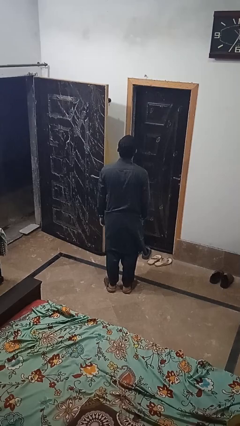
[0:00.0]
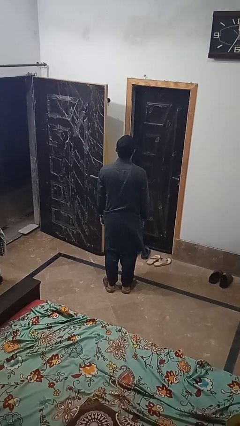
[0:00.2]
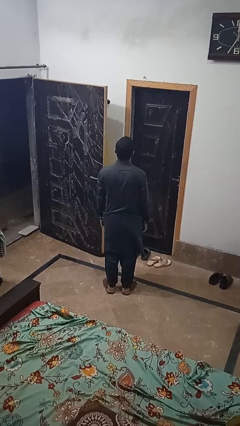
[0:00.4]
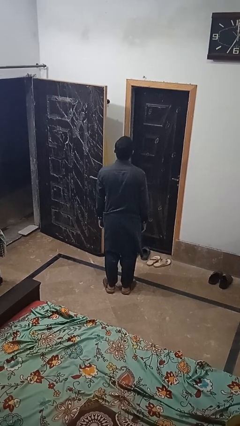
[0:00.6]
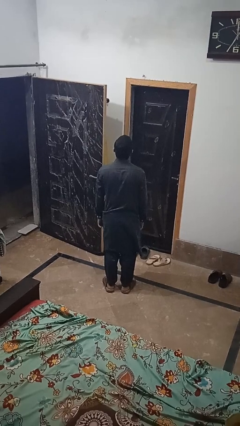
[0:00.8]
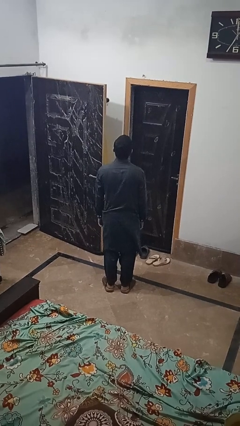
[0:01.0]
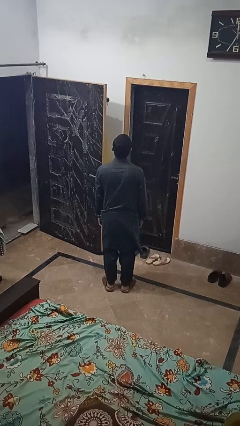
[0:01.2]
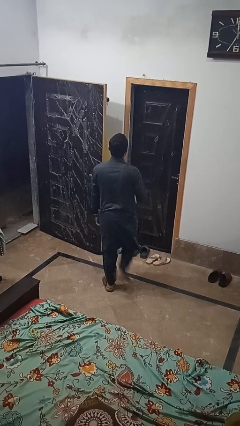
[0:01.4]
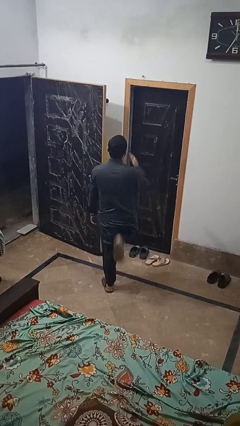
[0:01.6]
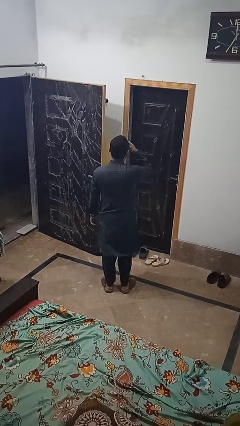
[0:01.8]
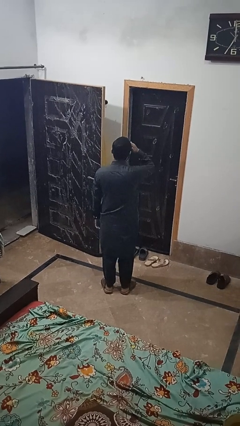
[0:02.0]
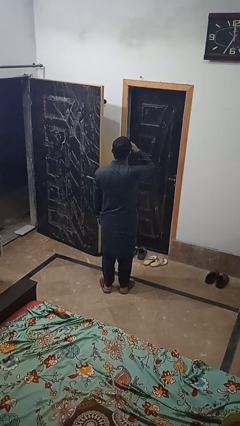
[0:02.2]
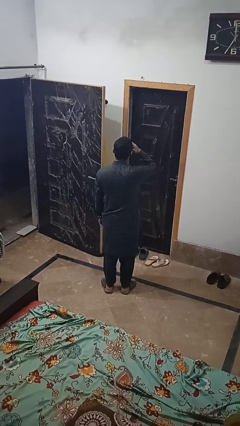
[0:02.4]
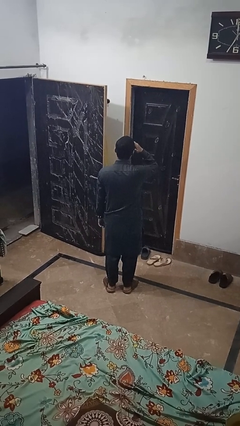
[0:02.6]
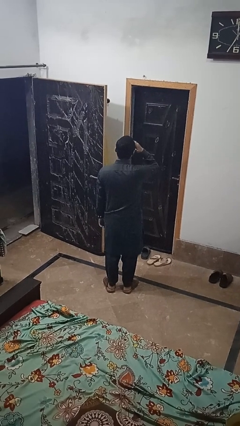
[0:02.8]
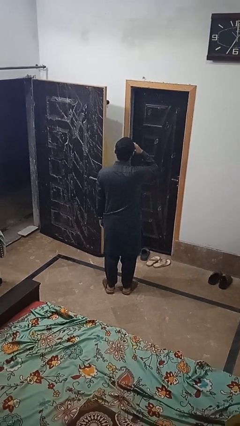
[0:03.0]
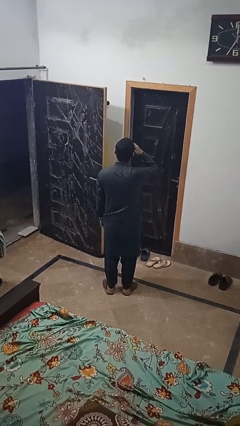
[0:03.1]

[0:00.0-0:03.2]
person salutes

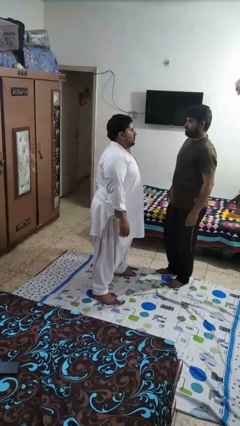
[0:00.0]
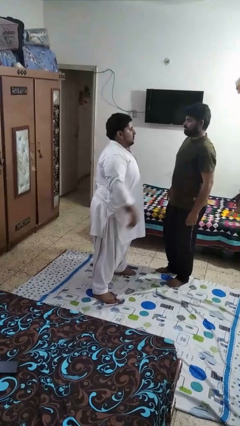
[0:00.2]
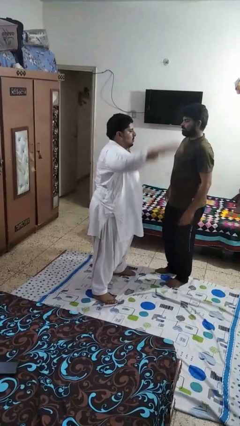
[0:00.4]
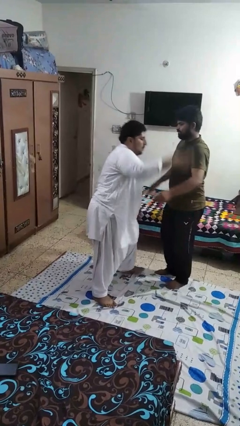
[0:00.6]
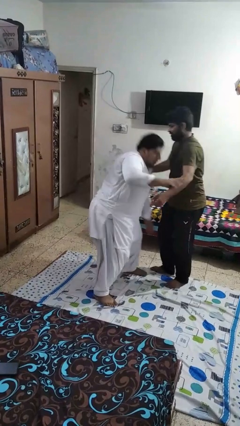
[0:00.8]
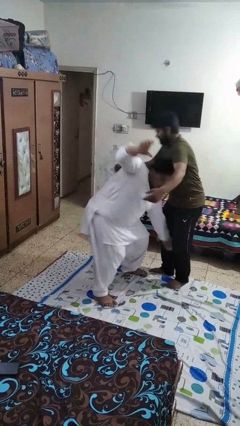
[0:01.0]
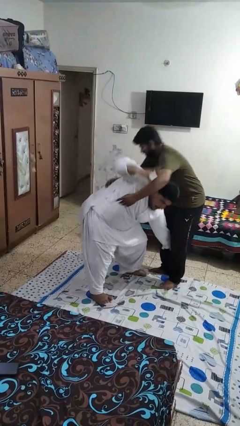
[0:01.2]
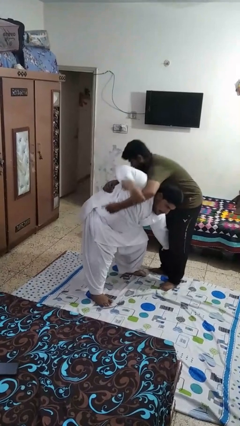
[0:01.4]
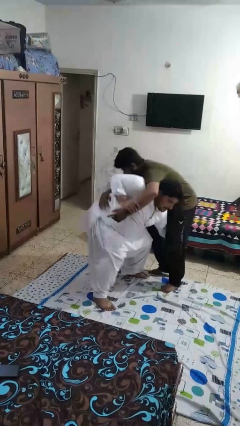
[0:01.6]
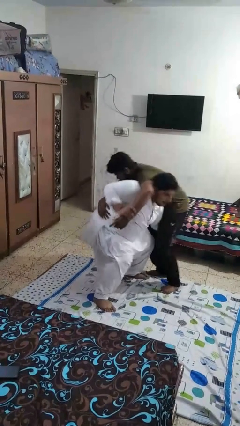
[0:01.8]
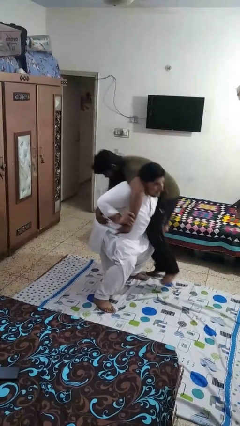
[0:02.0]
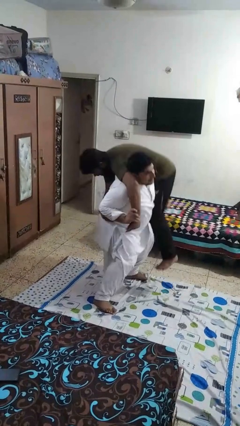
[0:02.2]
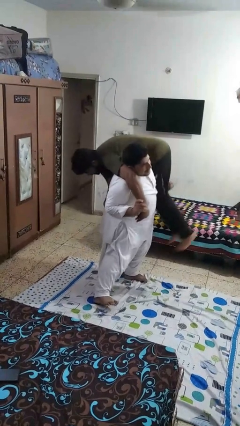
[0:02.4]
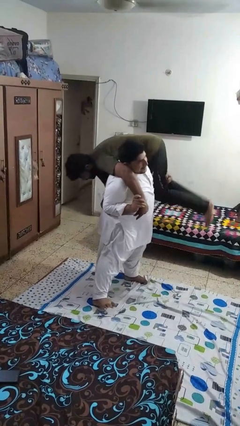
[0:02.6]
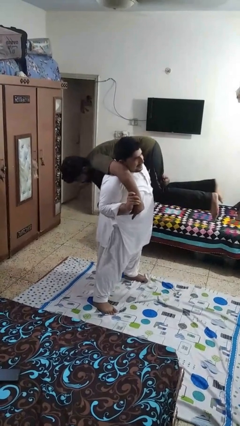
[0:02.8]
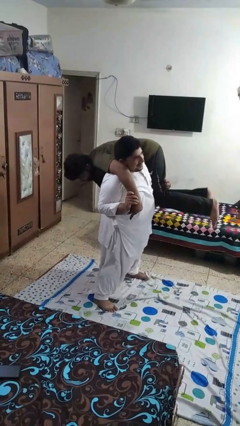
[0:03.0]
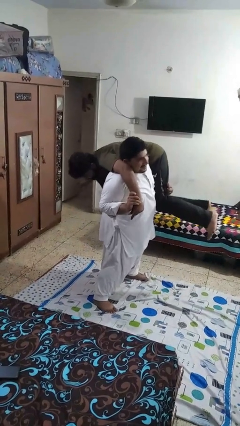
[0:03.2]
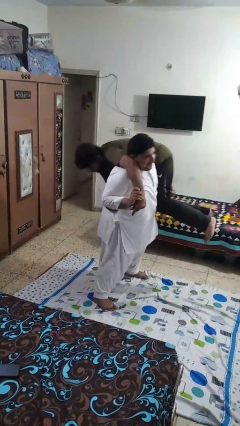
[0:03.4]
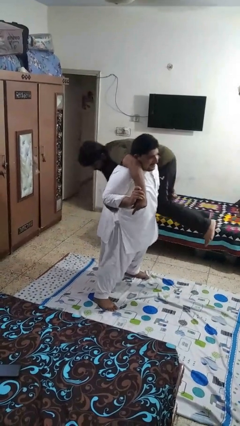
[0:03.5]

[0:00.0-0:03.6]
person carries person over shoulder

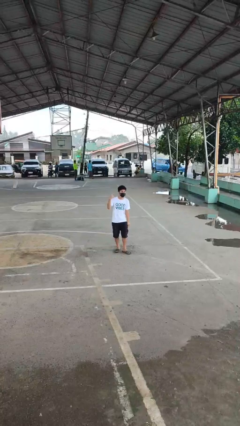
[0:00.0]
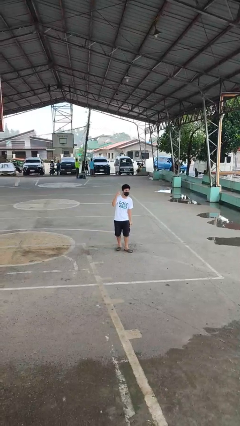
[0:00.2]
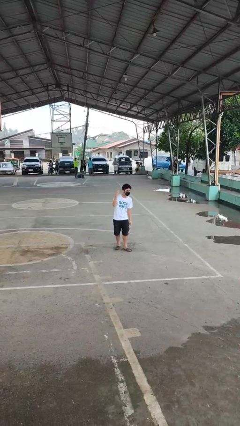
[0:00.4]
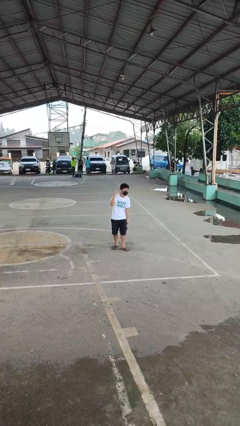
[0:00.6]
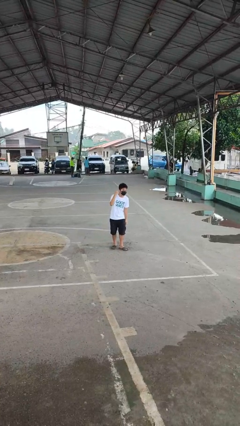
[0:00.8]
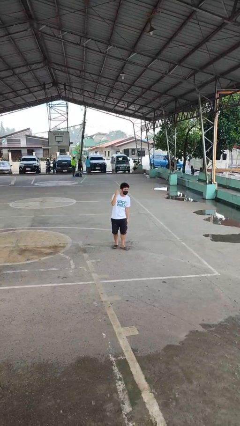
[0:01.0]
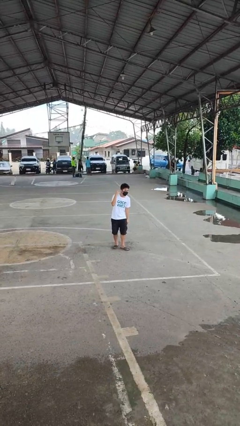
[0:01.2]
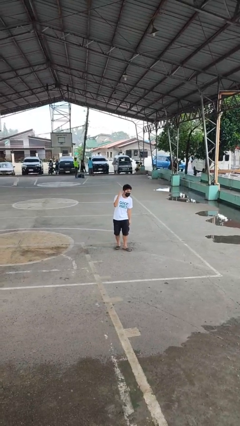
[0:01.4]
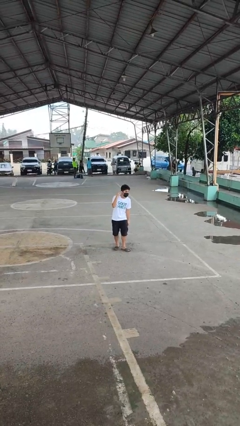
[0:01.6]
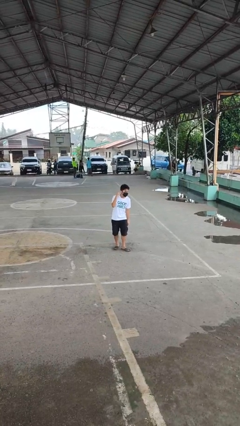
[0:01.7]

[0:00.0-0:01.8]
person gestures listen closely

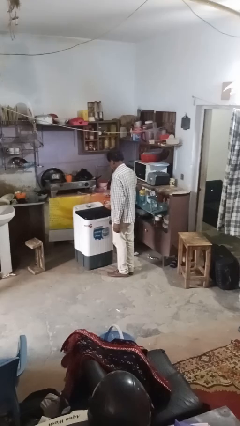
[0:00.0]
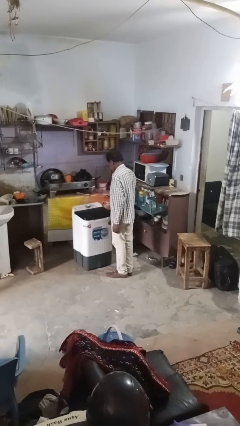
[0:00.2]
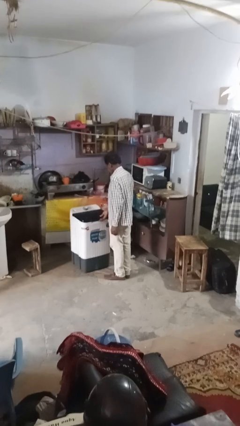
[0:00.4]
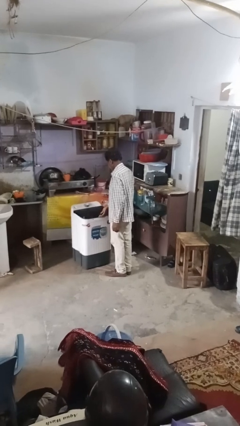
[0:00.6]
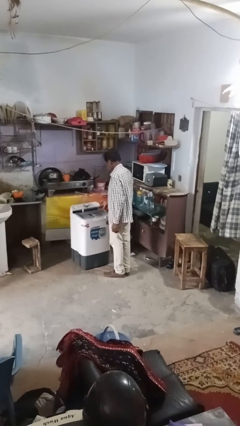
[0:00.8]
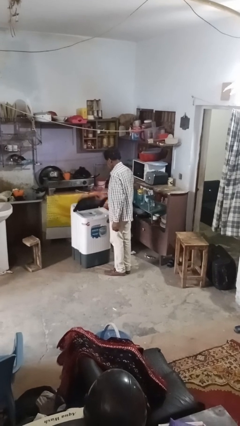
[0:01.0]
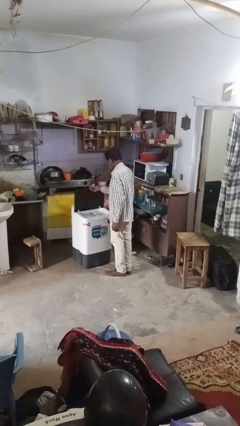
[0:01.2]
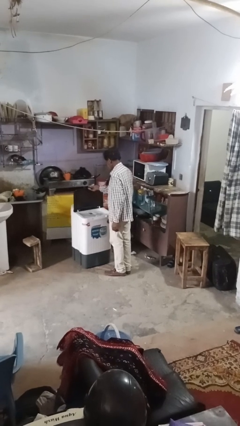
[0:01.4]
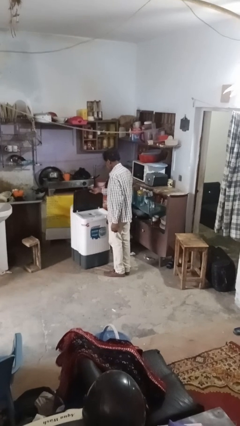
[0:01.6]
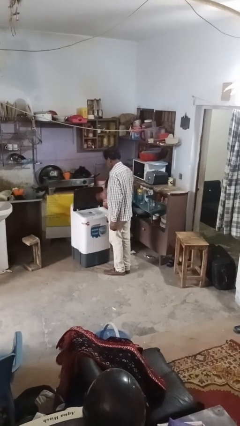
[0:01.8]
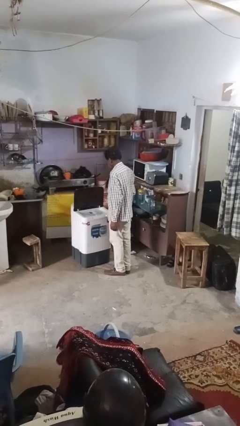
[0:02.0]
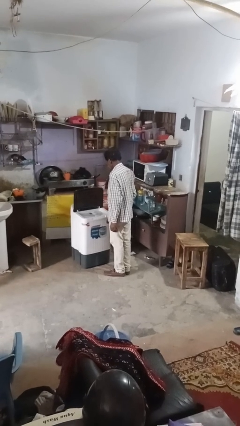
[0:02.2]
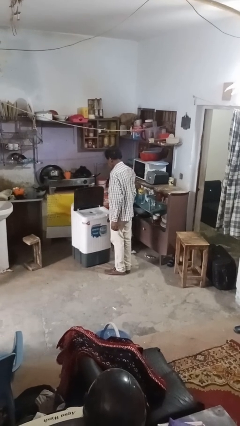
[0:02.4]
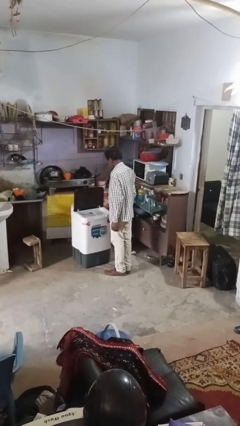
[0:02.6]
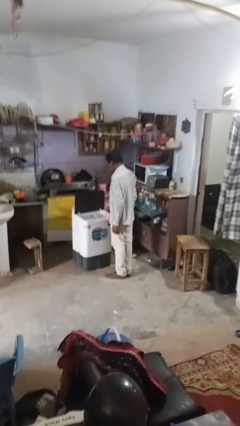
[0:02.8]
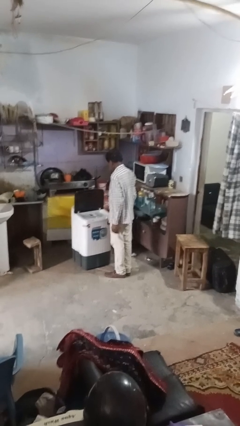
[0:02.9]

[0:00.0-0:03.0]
person opens clothes washer

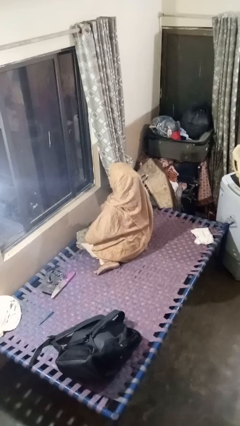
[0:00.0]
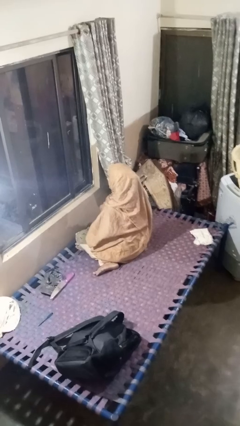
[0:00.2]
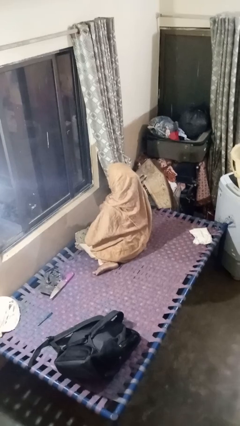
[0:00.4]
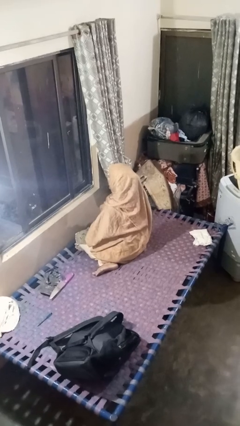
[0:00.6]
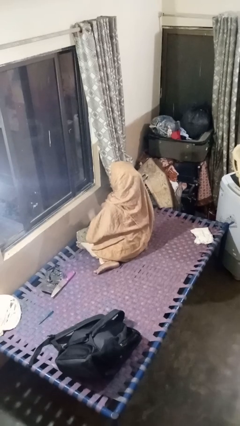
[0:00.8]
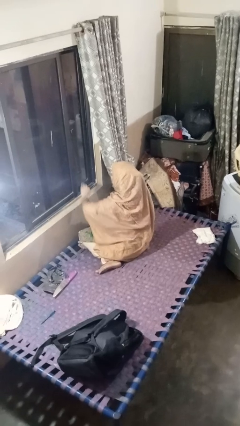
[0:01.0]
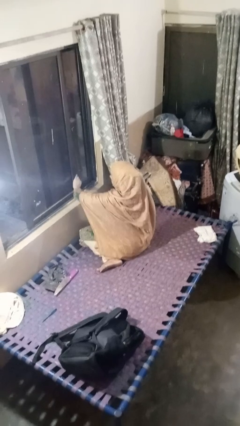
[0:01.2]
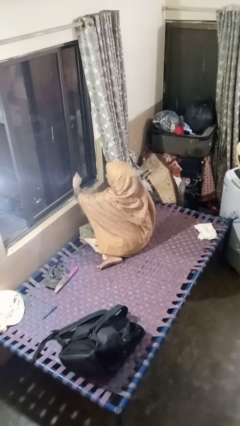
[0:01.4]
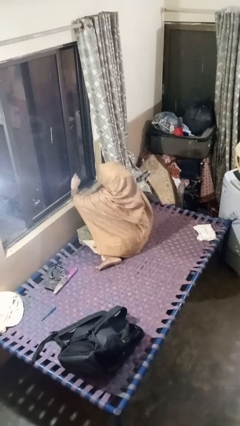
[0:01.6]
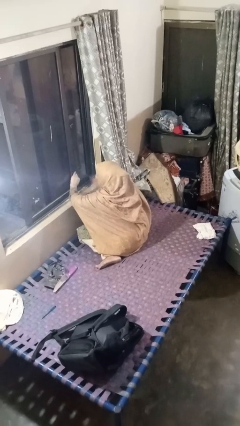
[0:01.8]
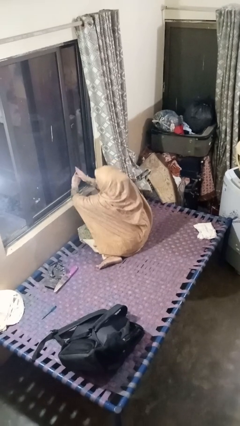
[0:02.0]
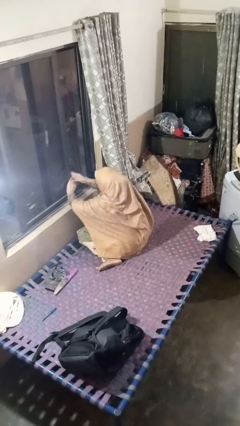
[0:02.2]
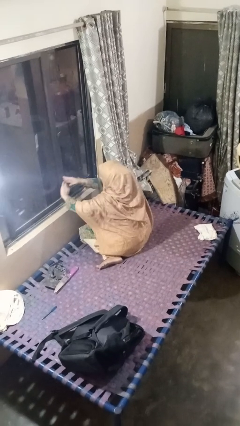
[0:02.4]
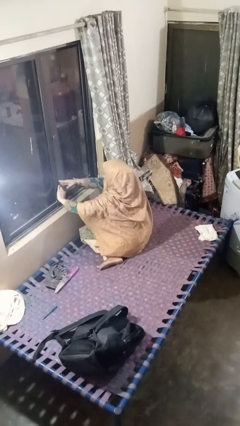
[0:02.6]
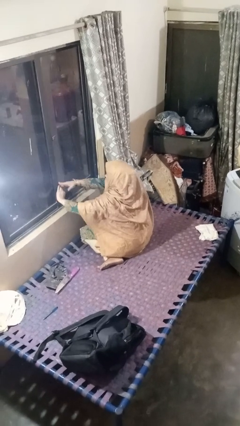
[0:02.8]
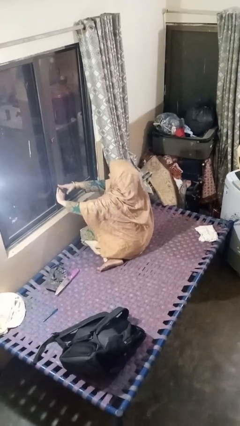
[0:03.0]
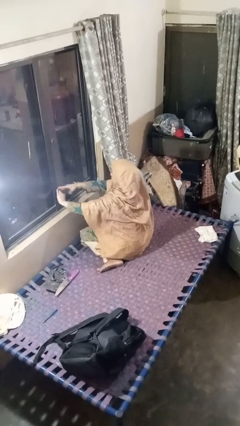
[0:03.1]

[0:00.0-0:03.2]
person closes home window

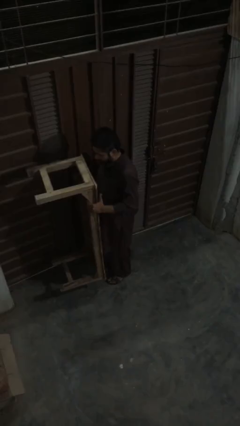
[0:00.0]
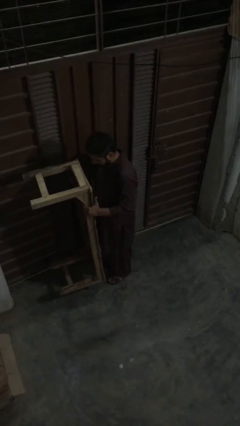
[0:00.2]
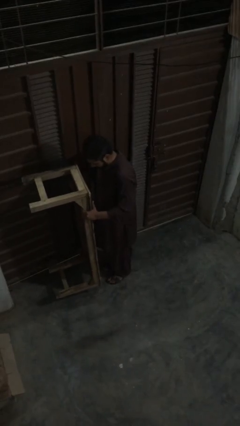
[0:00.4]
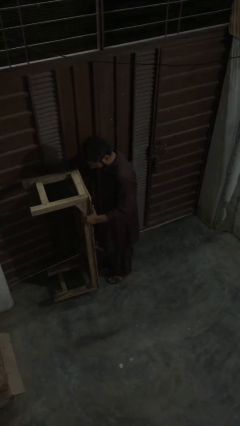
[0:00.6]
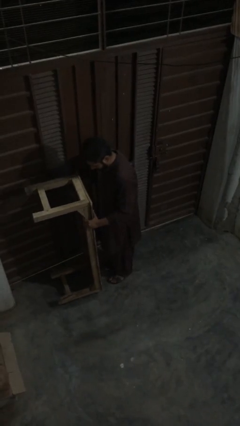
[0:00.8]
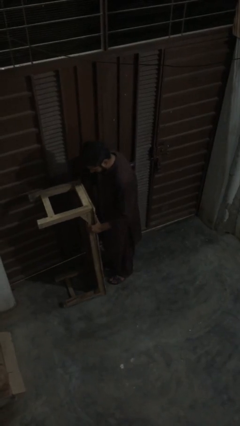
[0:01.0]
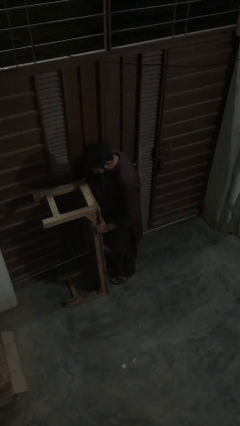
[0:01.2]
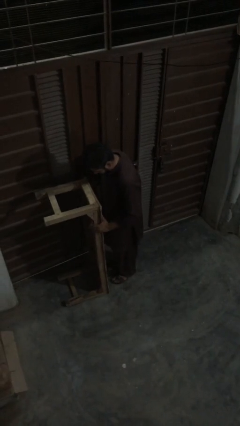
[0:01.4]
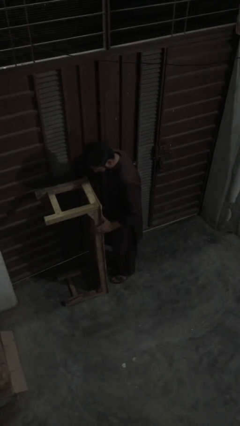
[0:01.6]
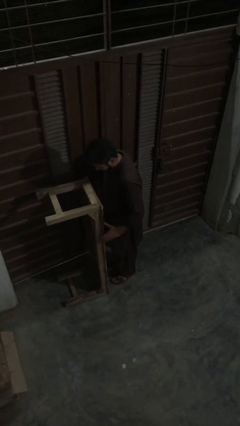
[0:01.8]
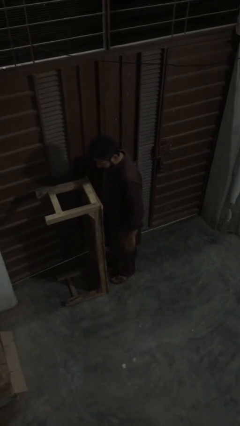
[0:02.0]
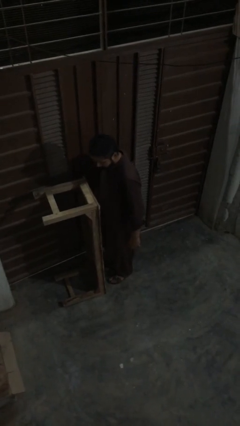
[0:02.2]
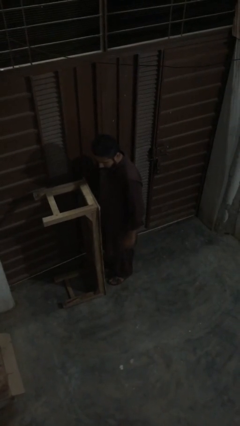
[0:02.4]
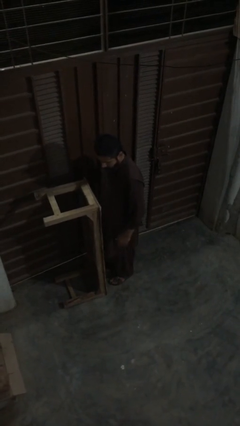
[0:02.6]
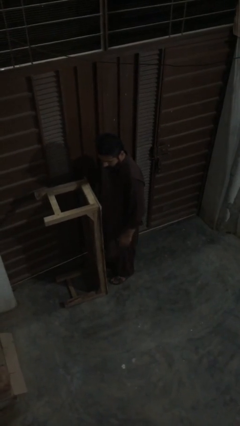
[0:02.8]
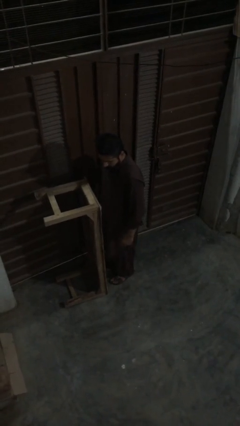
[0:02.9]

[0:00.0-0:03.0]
person puts down object on floor
